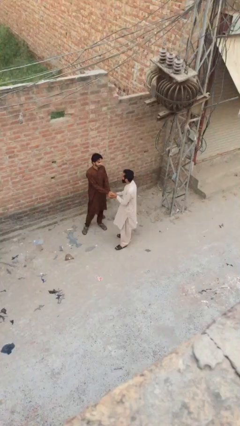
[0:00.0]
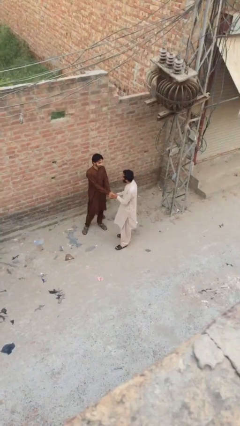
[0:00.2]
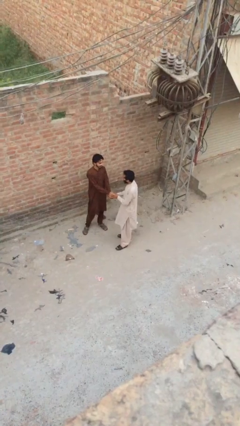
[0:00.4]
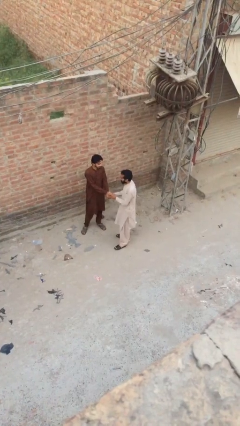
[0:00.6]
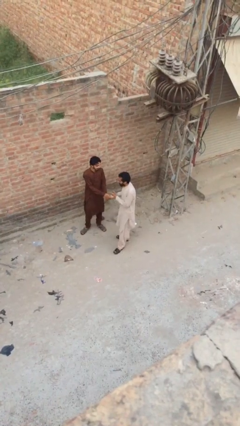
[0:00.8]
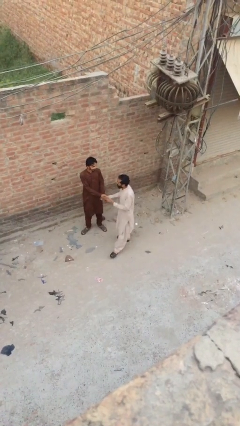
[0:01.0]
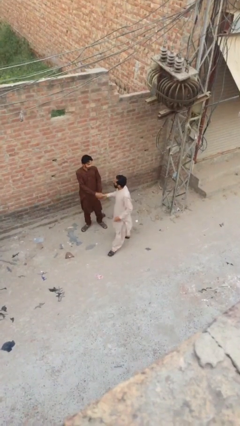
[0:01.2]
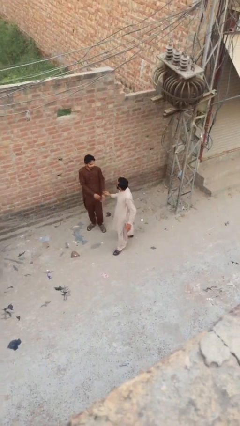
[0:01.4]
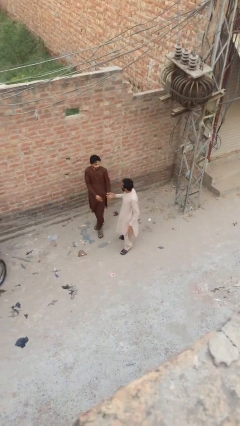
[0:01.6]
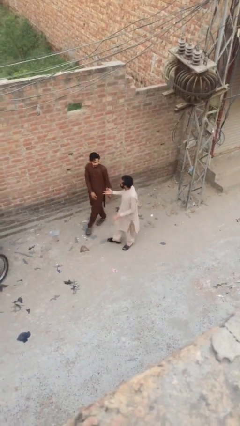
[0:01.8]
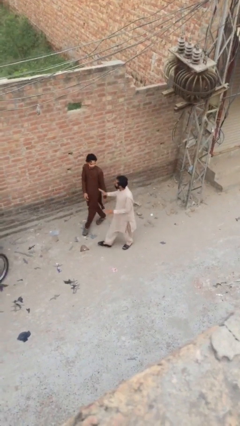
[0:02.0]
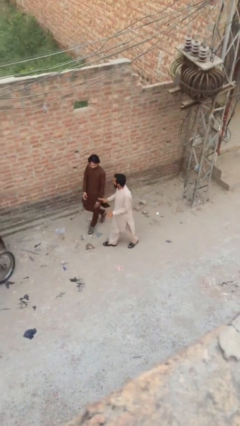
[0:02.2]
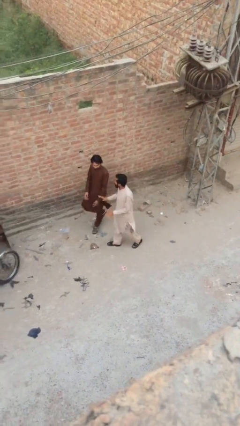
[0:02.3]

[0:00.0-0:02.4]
person talks to person

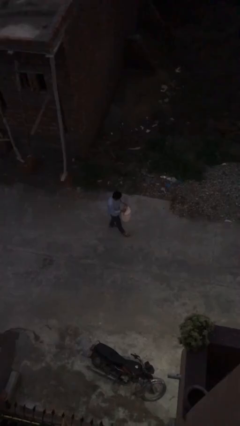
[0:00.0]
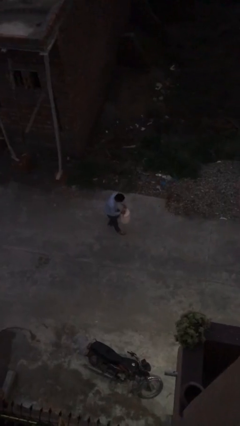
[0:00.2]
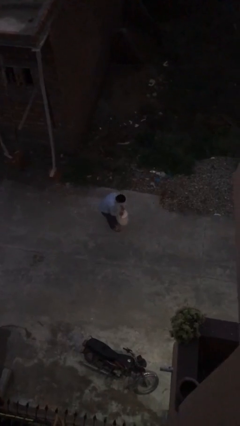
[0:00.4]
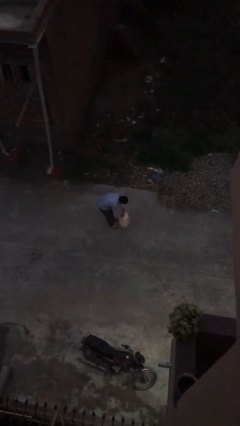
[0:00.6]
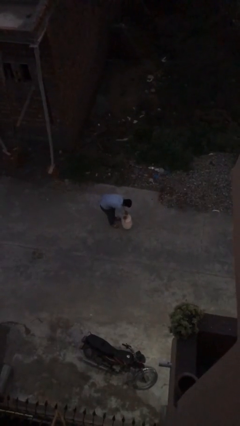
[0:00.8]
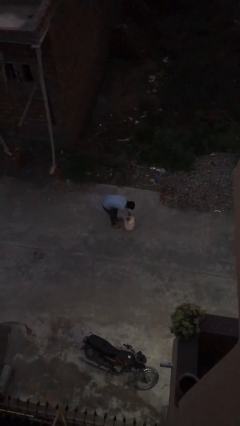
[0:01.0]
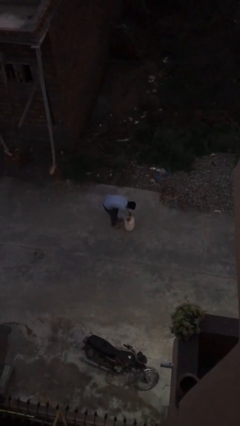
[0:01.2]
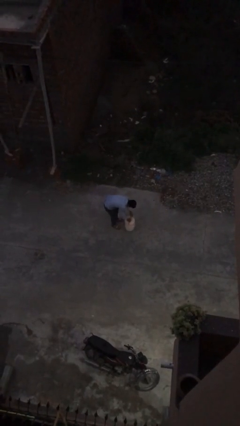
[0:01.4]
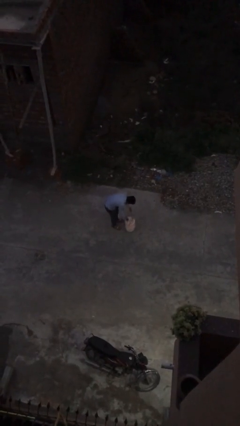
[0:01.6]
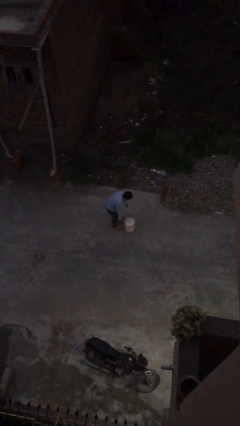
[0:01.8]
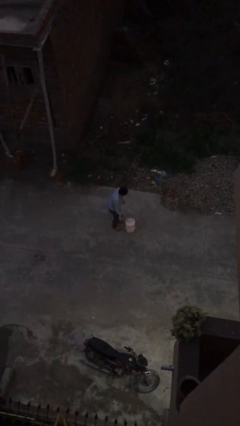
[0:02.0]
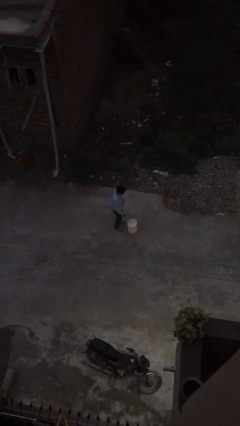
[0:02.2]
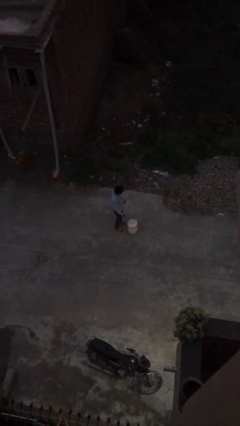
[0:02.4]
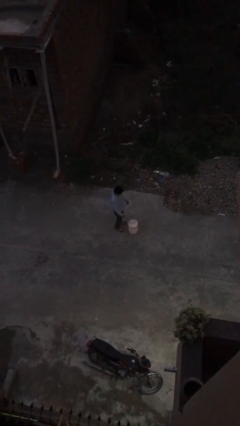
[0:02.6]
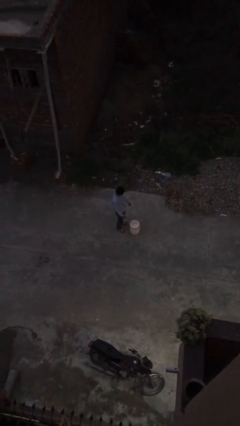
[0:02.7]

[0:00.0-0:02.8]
person puts down object on floor

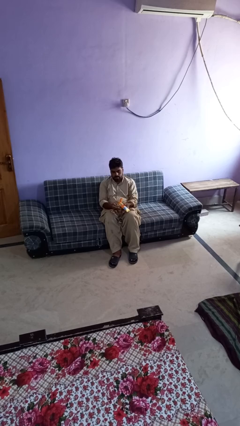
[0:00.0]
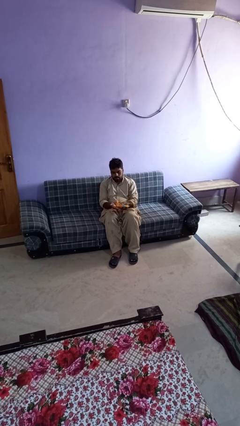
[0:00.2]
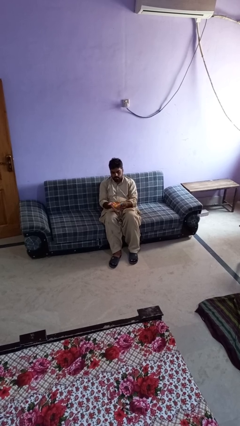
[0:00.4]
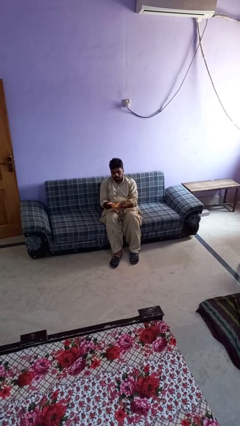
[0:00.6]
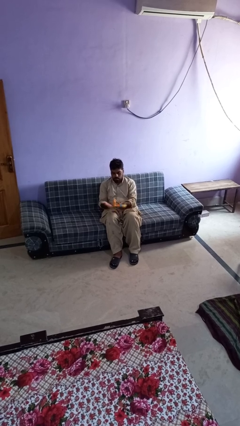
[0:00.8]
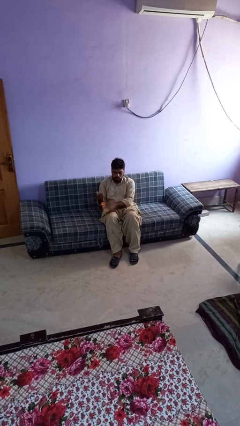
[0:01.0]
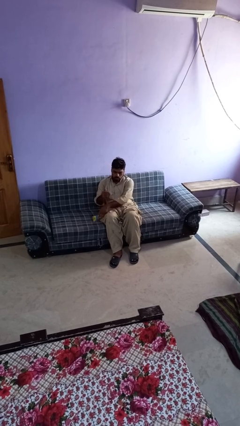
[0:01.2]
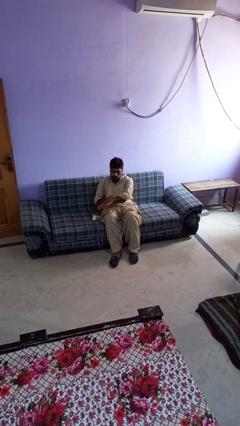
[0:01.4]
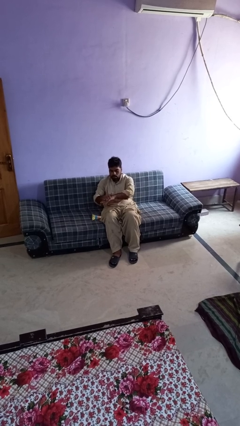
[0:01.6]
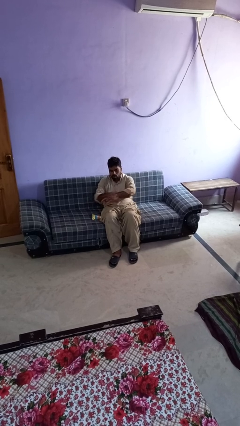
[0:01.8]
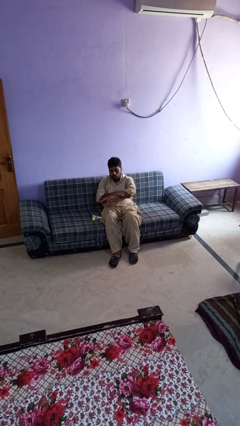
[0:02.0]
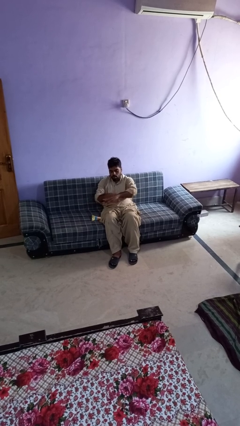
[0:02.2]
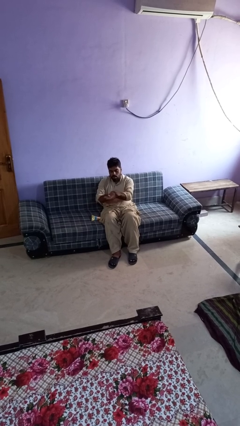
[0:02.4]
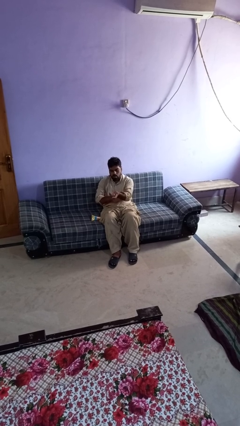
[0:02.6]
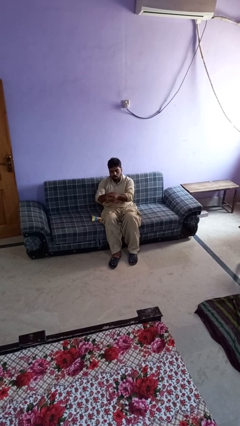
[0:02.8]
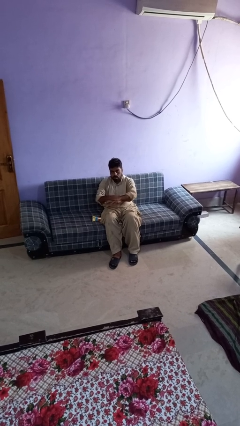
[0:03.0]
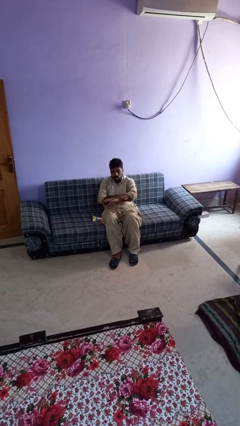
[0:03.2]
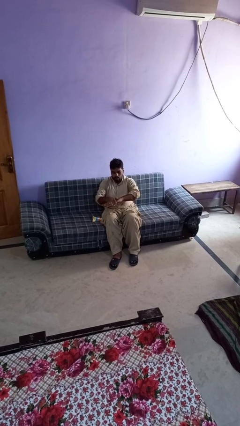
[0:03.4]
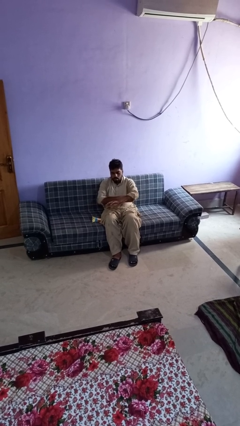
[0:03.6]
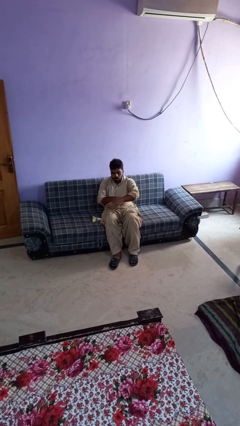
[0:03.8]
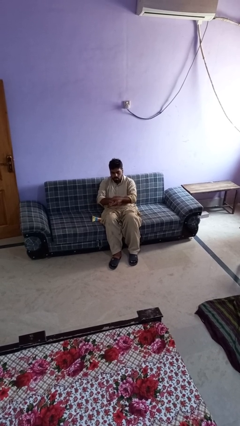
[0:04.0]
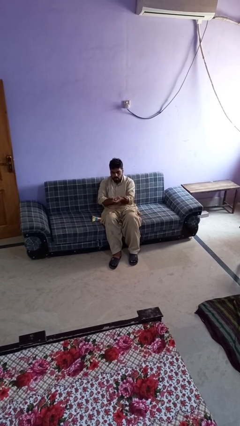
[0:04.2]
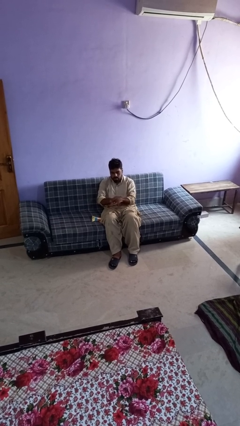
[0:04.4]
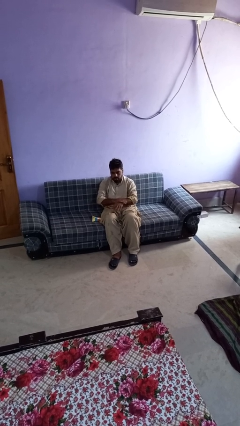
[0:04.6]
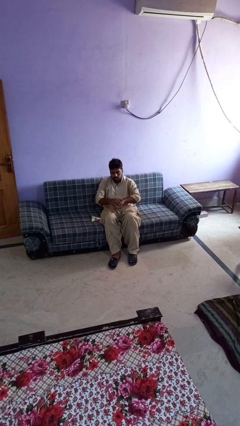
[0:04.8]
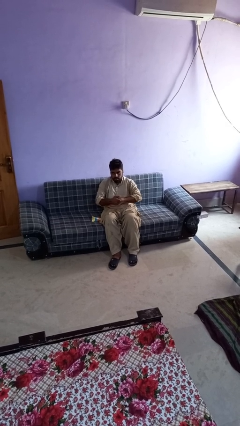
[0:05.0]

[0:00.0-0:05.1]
person applies sunscreen

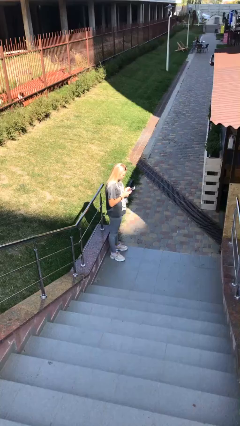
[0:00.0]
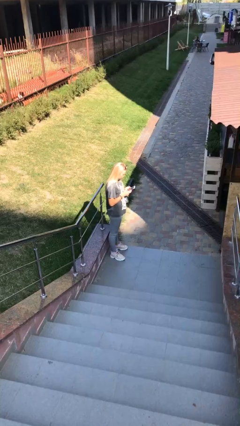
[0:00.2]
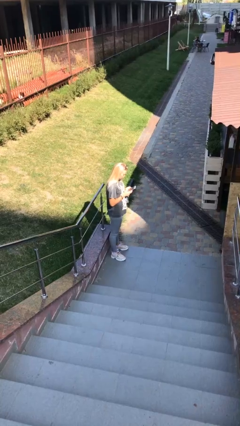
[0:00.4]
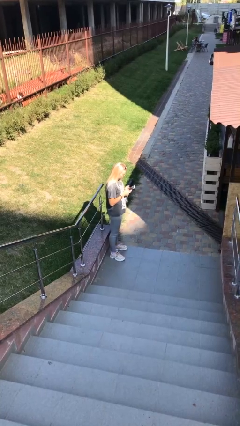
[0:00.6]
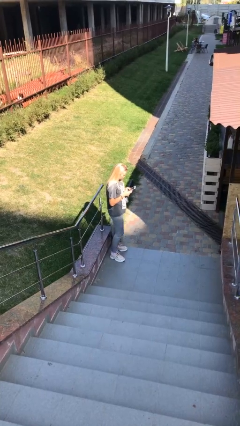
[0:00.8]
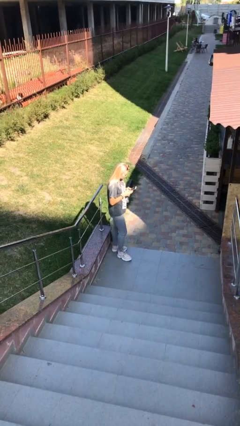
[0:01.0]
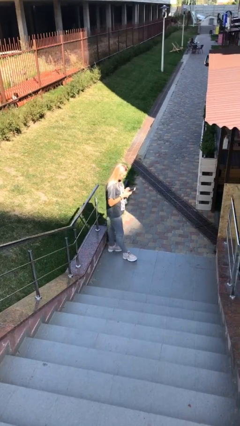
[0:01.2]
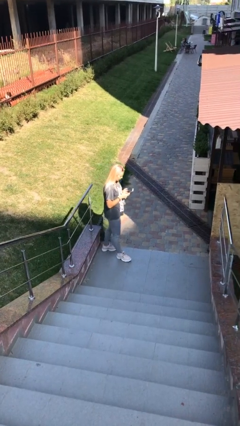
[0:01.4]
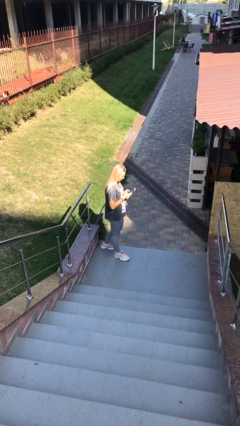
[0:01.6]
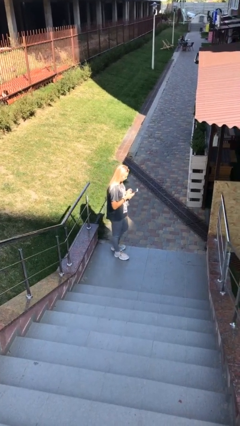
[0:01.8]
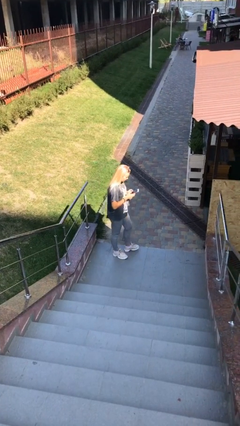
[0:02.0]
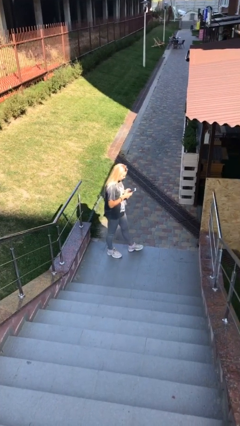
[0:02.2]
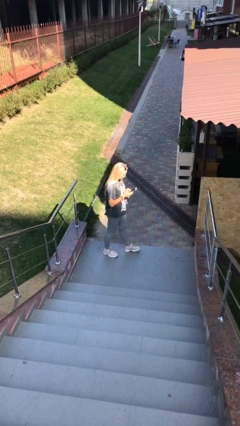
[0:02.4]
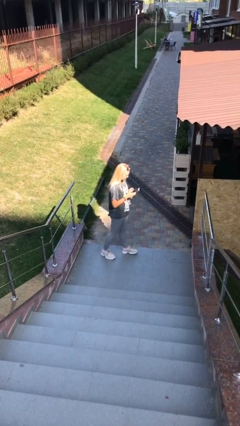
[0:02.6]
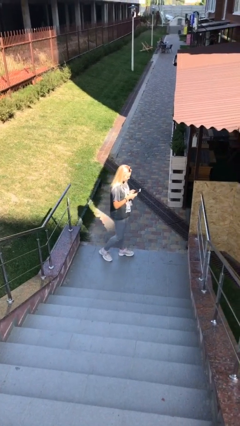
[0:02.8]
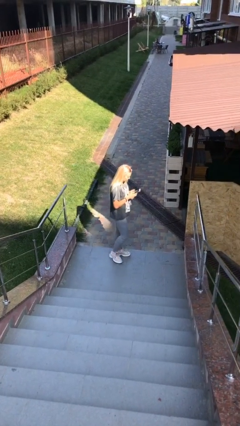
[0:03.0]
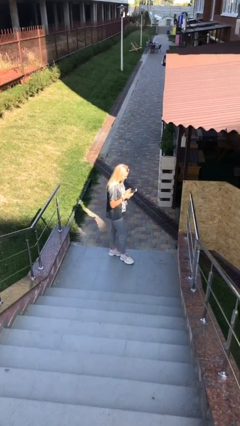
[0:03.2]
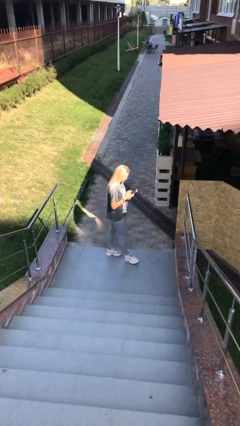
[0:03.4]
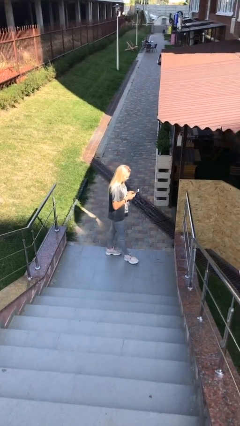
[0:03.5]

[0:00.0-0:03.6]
person texts on phone

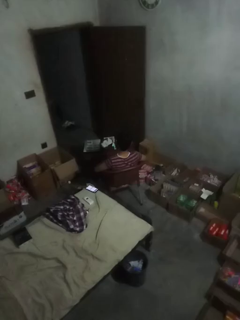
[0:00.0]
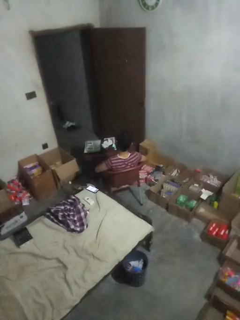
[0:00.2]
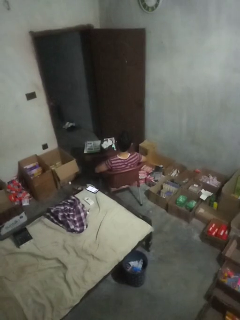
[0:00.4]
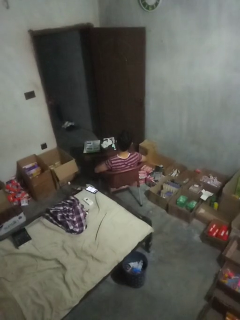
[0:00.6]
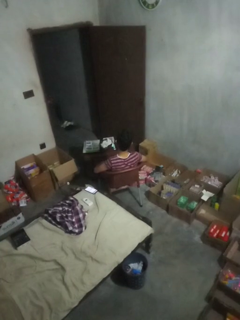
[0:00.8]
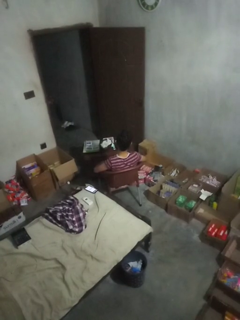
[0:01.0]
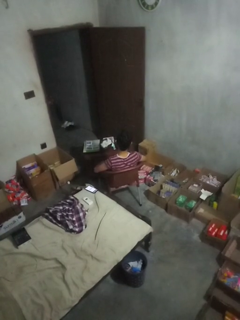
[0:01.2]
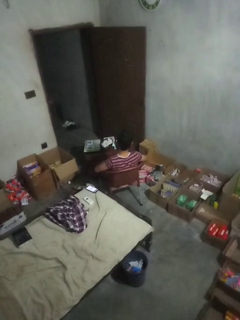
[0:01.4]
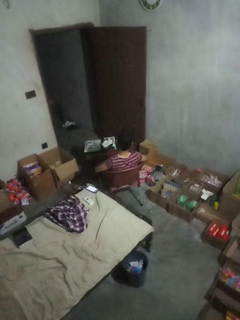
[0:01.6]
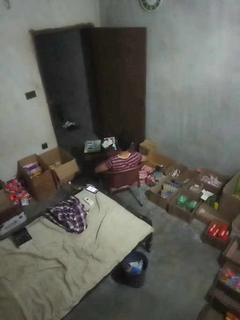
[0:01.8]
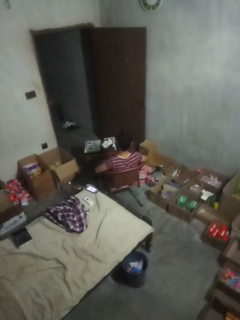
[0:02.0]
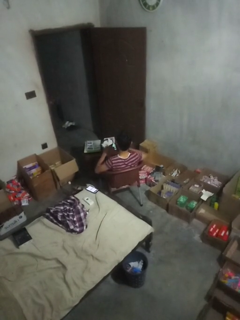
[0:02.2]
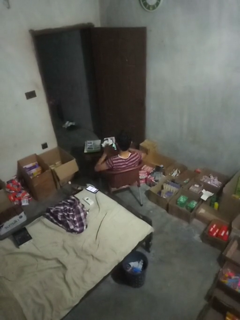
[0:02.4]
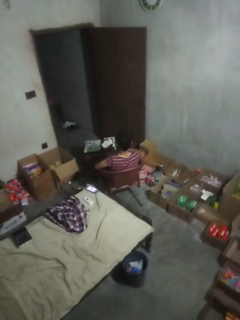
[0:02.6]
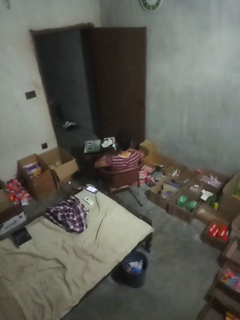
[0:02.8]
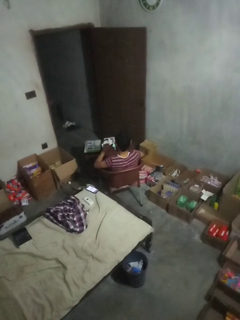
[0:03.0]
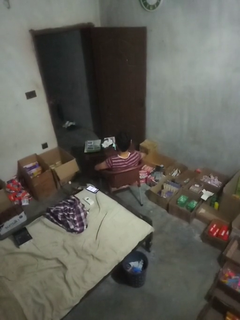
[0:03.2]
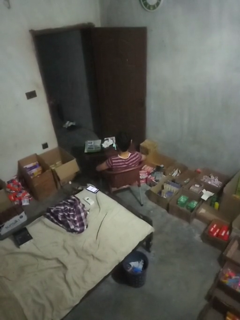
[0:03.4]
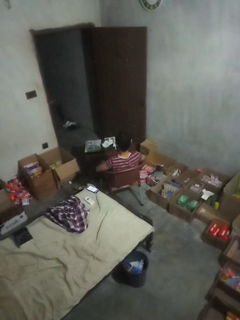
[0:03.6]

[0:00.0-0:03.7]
person slaps hands on thighs

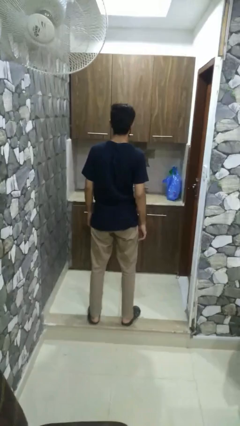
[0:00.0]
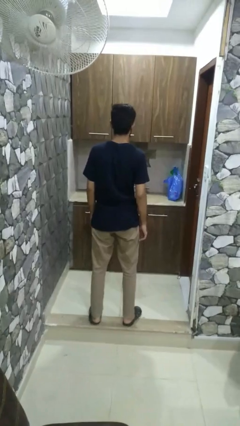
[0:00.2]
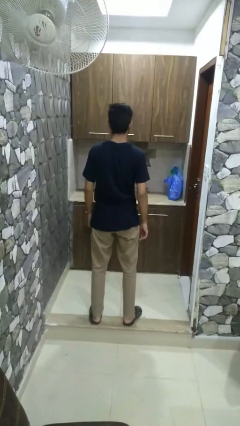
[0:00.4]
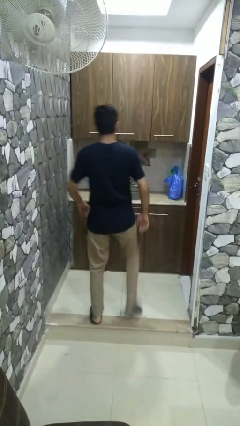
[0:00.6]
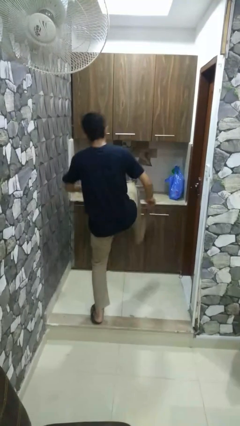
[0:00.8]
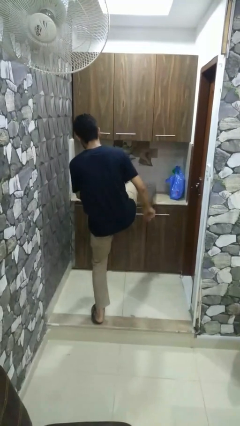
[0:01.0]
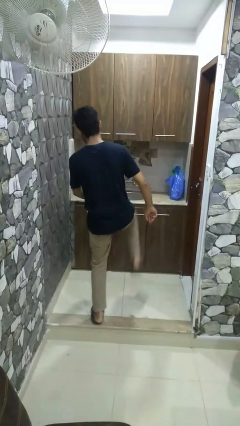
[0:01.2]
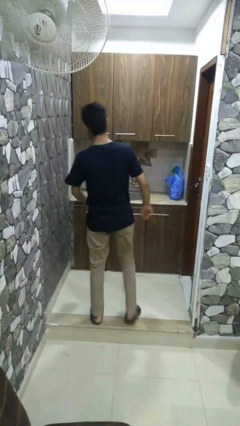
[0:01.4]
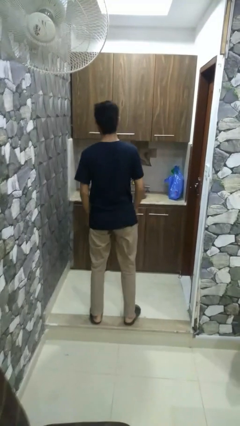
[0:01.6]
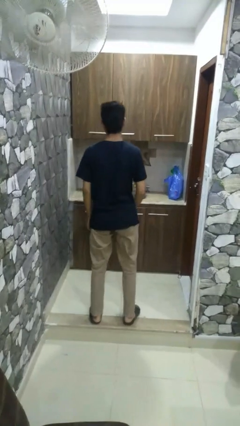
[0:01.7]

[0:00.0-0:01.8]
person karate kicks
